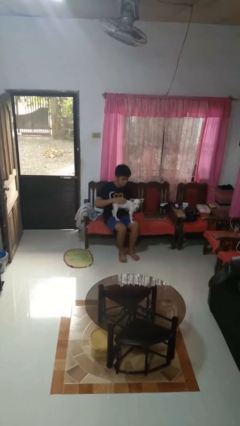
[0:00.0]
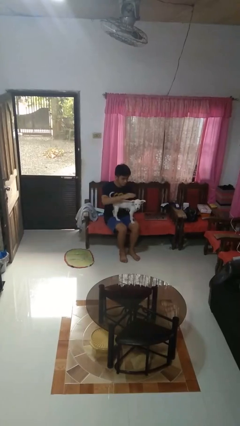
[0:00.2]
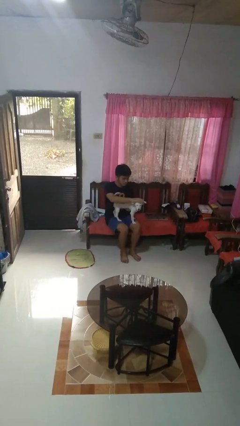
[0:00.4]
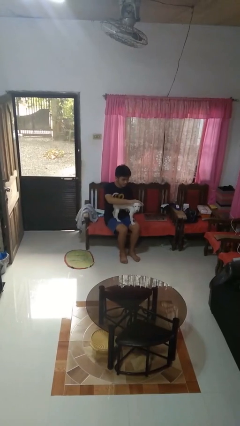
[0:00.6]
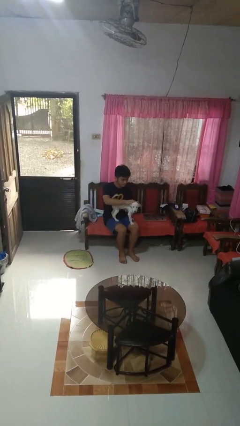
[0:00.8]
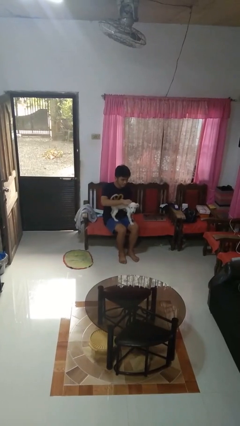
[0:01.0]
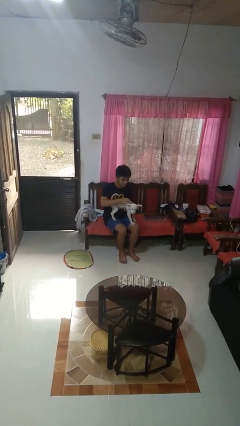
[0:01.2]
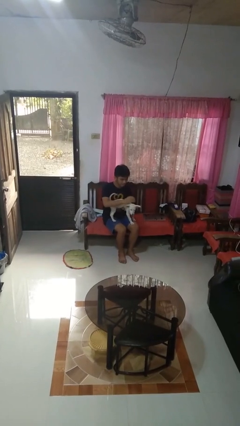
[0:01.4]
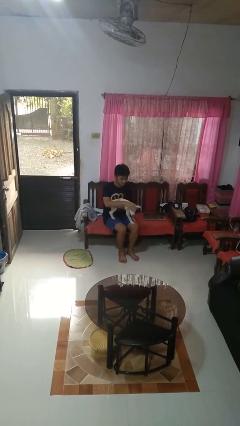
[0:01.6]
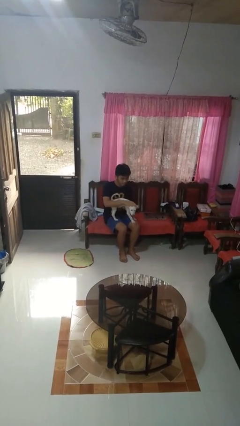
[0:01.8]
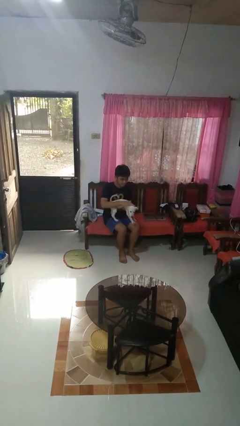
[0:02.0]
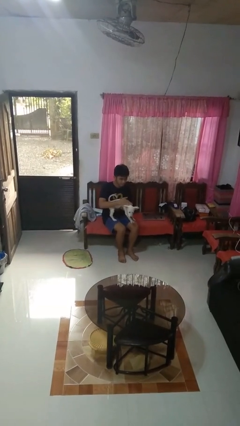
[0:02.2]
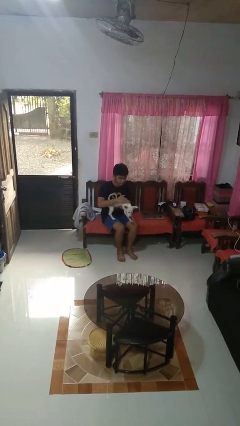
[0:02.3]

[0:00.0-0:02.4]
person pets dog

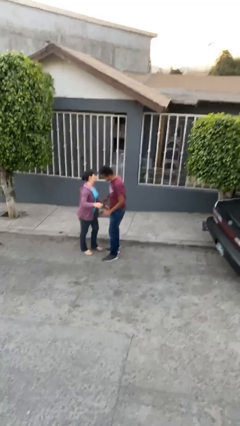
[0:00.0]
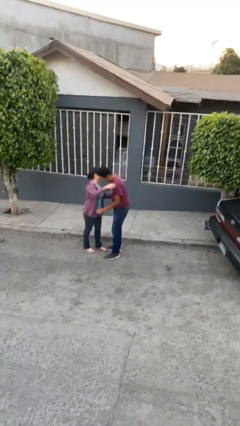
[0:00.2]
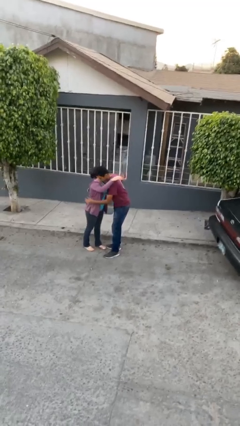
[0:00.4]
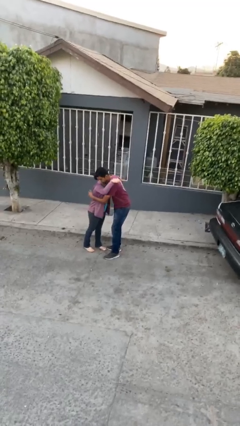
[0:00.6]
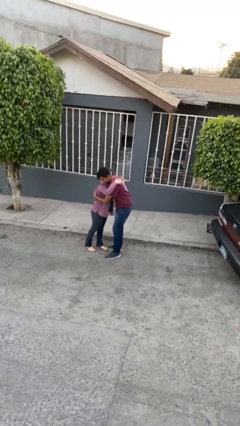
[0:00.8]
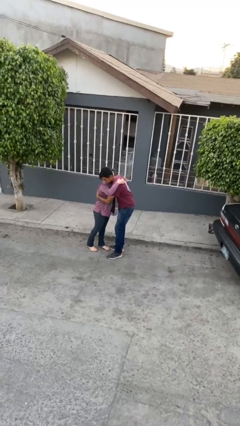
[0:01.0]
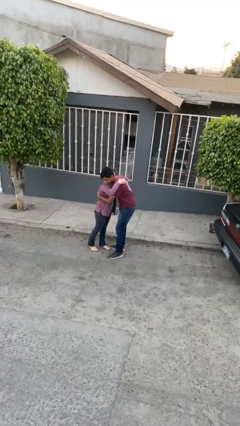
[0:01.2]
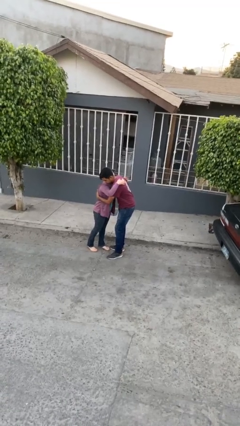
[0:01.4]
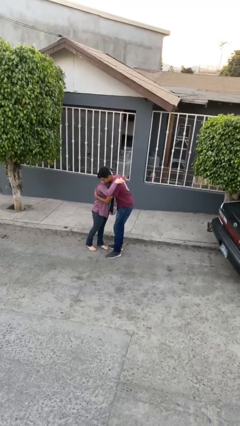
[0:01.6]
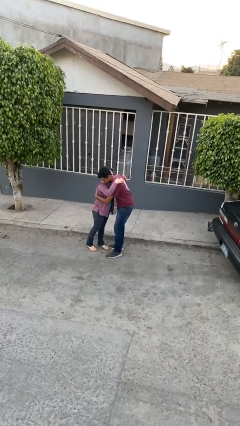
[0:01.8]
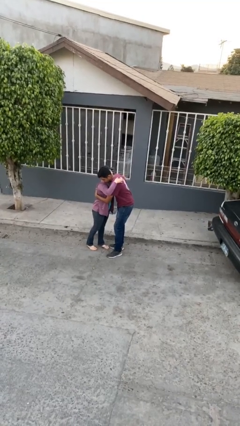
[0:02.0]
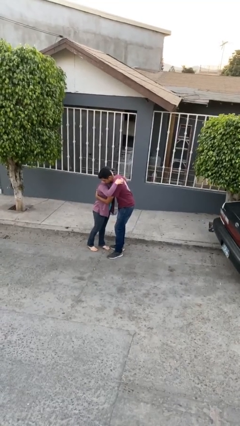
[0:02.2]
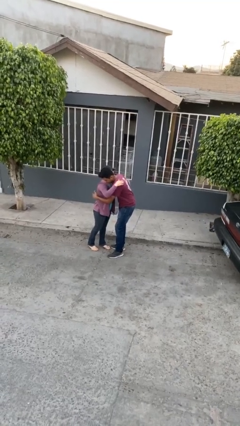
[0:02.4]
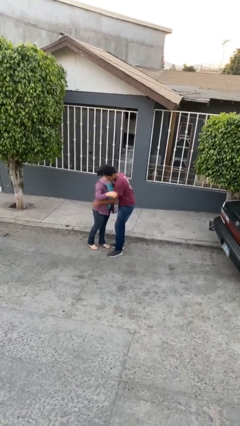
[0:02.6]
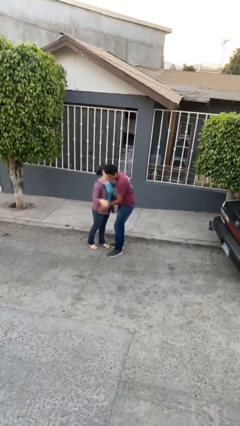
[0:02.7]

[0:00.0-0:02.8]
person embraces person

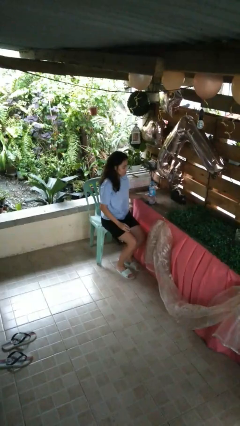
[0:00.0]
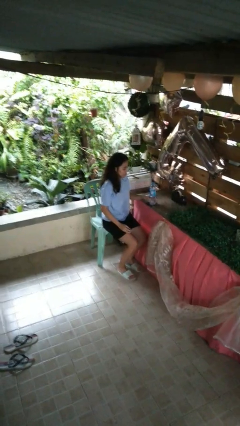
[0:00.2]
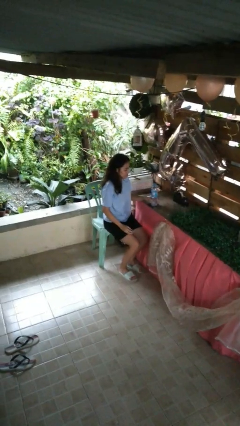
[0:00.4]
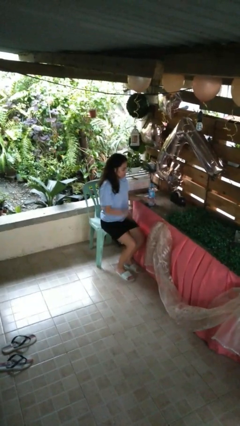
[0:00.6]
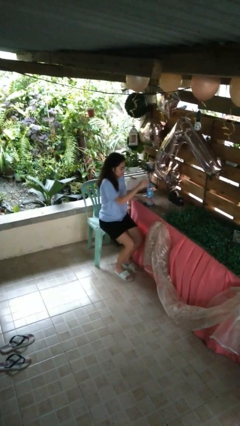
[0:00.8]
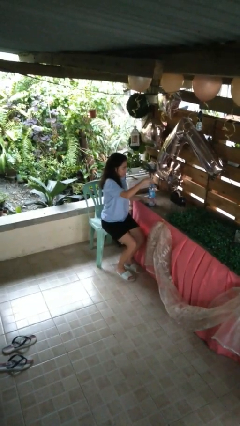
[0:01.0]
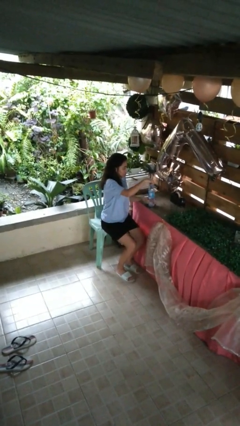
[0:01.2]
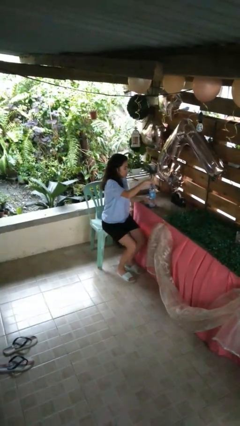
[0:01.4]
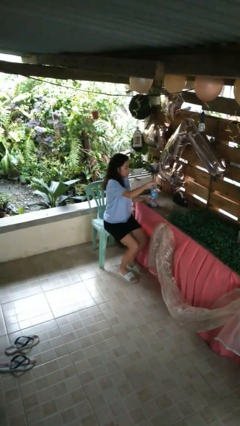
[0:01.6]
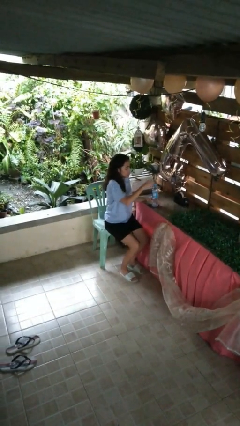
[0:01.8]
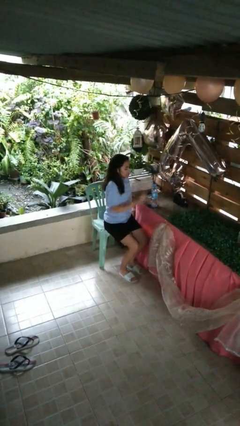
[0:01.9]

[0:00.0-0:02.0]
person screws lid to bottle

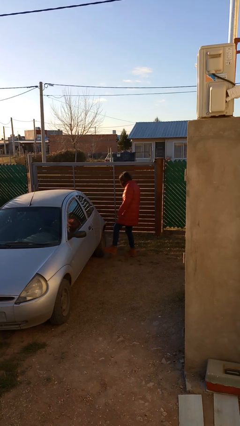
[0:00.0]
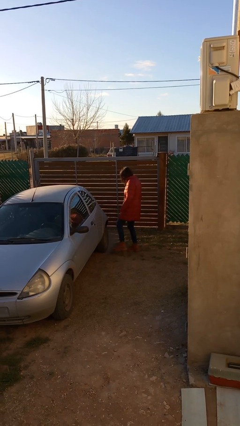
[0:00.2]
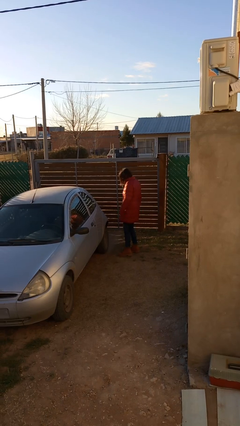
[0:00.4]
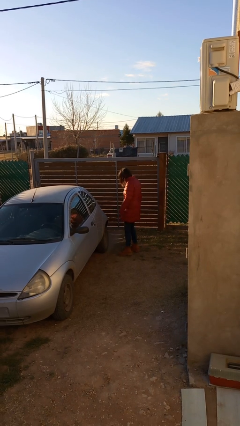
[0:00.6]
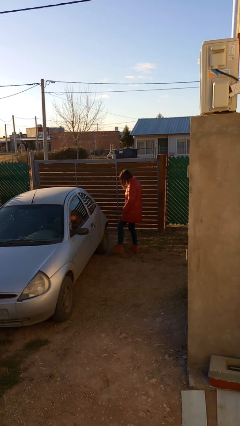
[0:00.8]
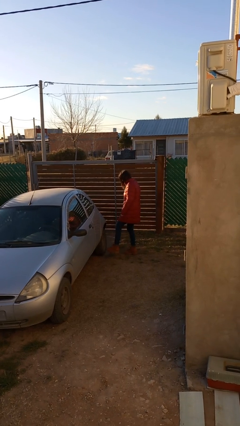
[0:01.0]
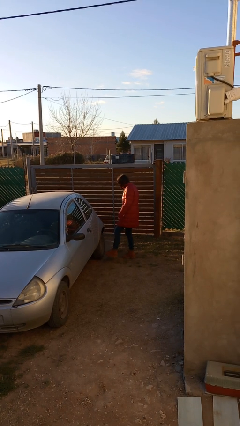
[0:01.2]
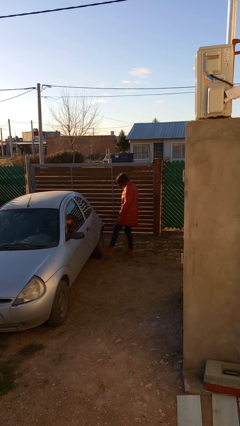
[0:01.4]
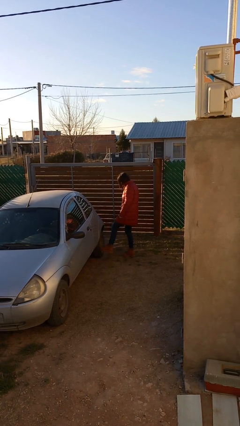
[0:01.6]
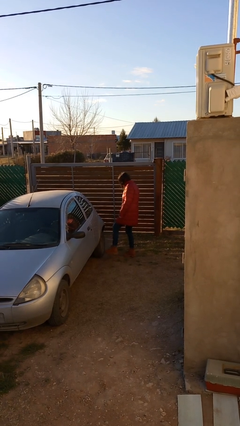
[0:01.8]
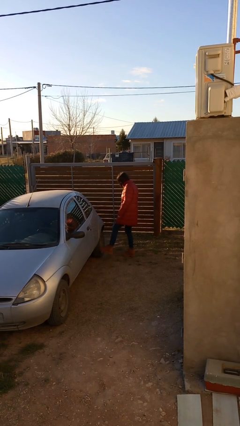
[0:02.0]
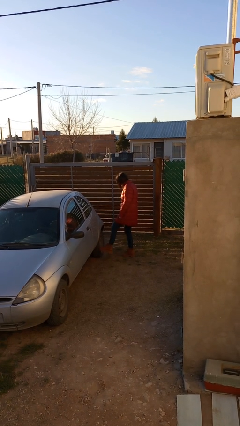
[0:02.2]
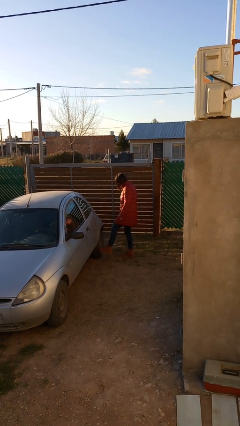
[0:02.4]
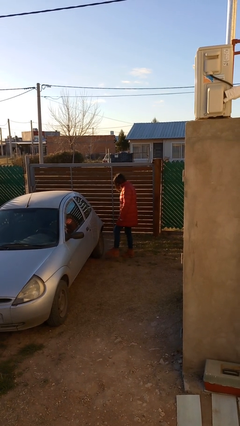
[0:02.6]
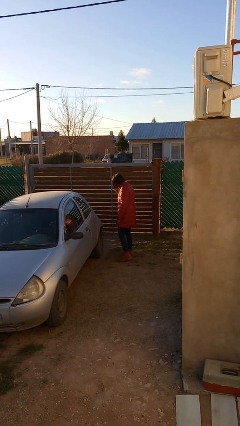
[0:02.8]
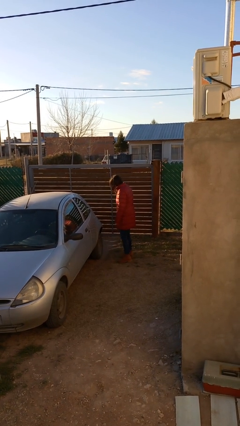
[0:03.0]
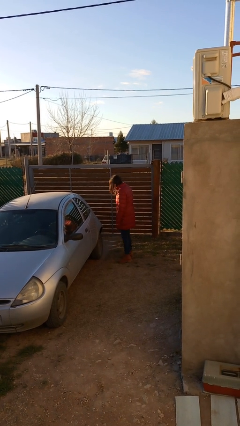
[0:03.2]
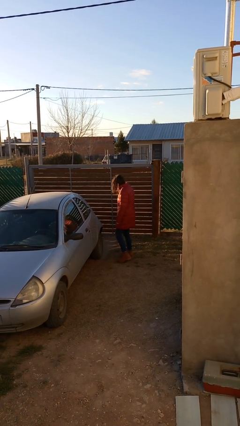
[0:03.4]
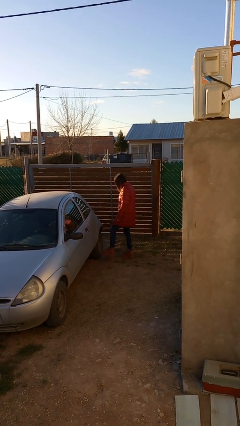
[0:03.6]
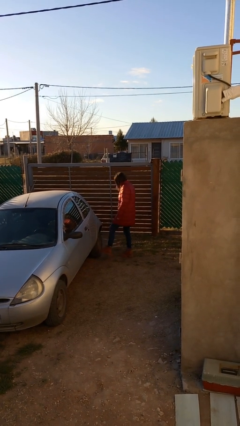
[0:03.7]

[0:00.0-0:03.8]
person kicks car tires

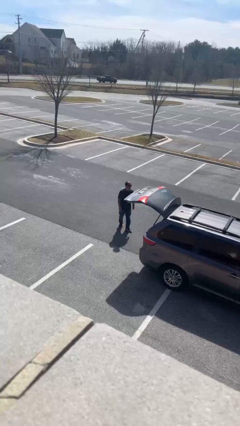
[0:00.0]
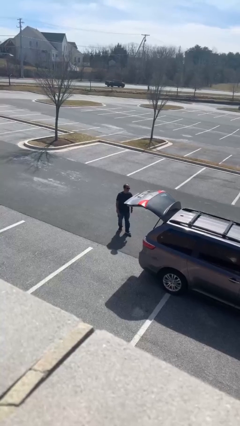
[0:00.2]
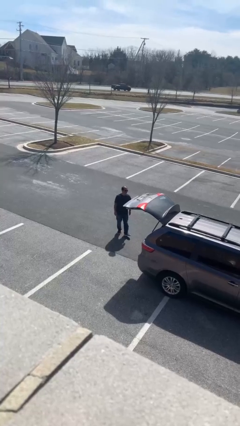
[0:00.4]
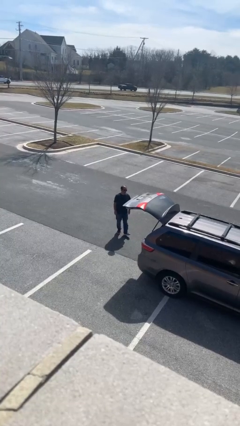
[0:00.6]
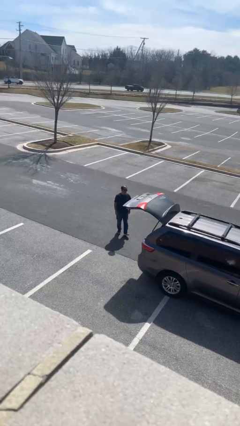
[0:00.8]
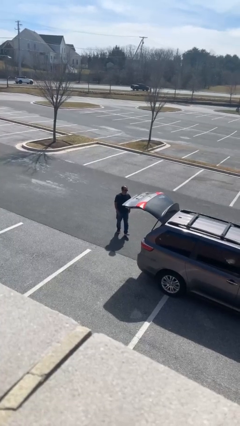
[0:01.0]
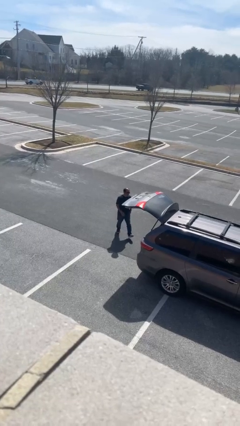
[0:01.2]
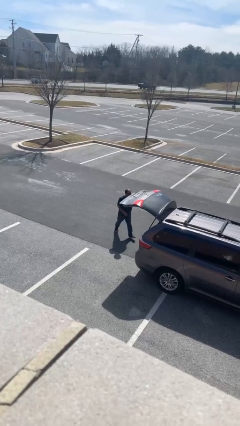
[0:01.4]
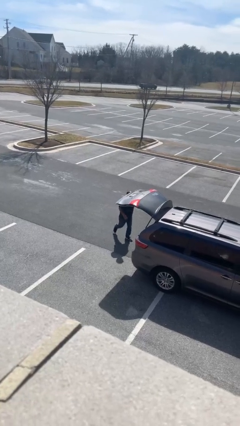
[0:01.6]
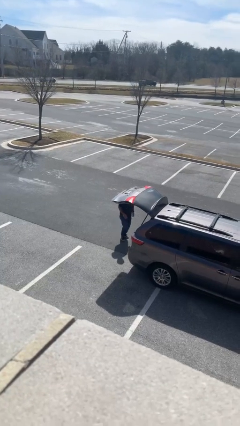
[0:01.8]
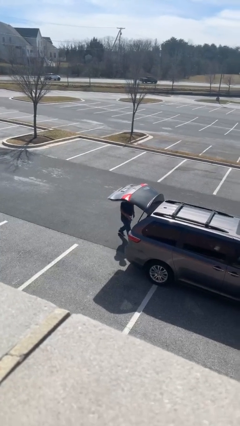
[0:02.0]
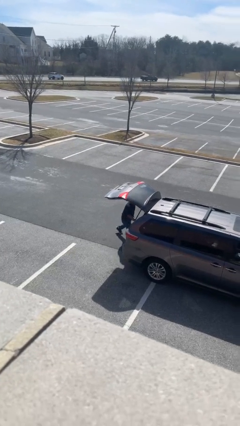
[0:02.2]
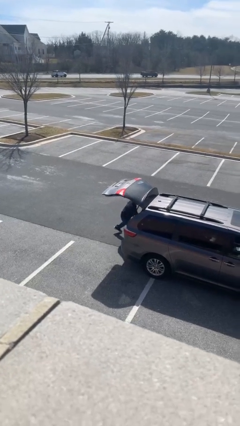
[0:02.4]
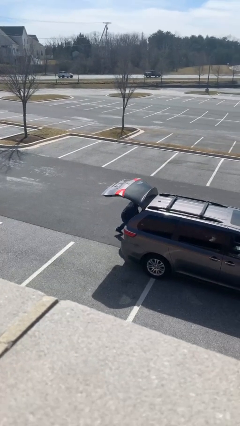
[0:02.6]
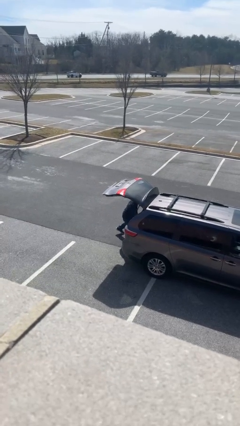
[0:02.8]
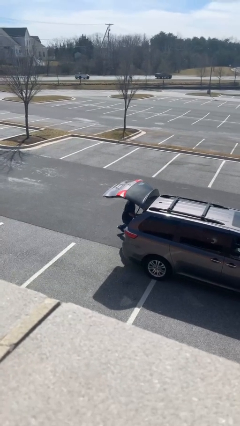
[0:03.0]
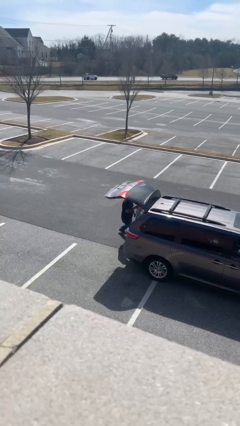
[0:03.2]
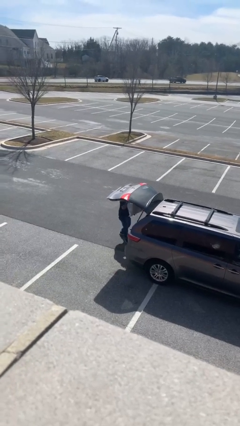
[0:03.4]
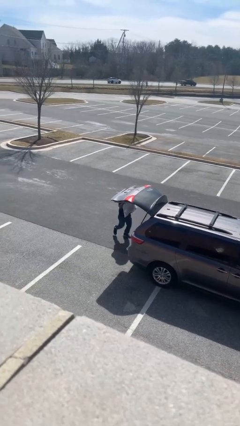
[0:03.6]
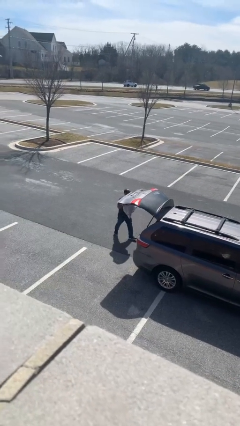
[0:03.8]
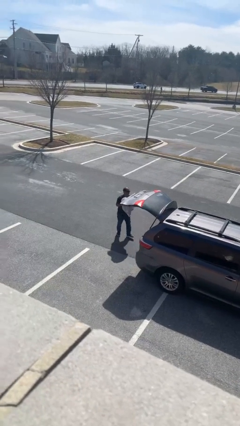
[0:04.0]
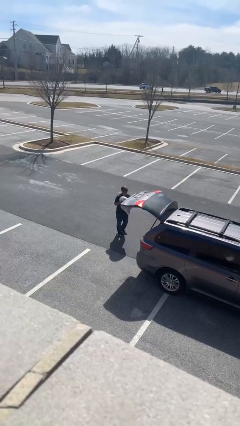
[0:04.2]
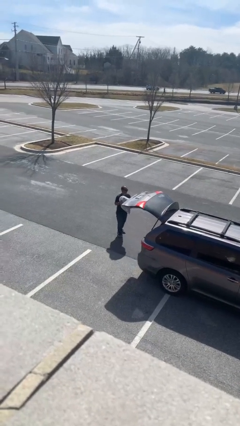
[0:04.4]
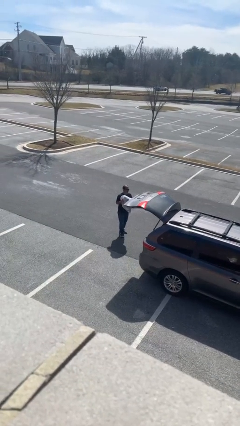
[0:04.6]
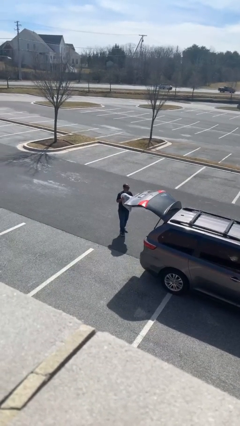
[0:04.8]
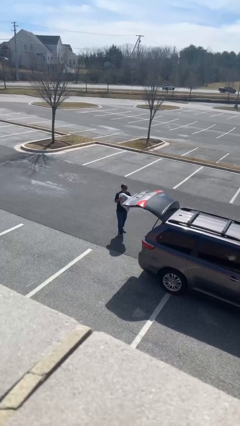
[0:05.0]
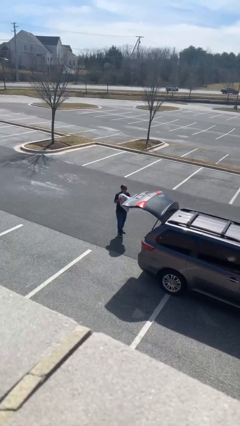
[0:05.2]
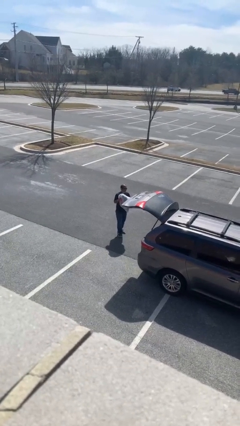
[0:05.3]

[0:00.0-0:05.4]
person unloads car

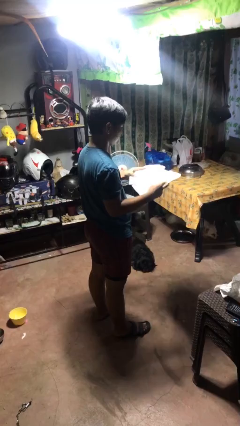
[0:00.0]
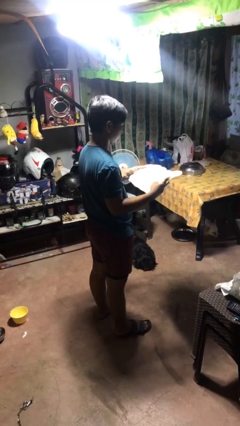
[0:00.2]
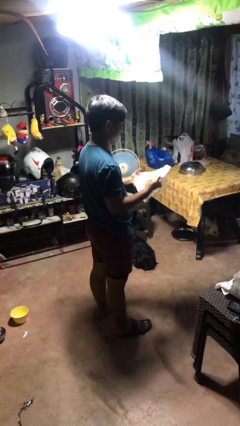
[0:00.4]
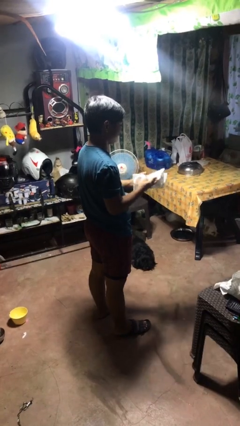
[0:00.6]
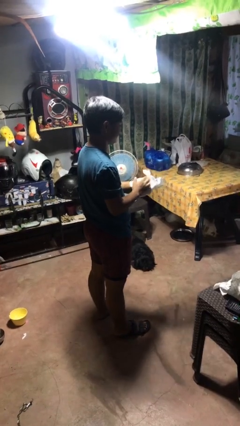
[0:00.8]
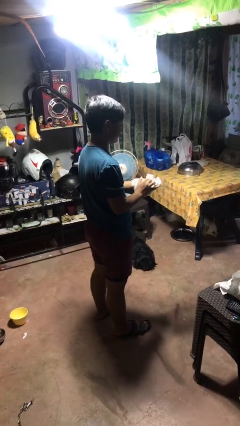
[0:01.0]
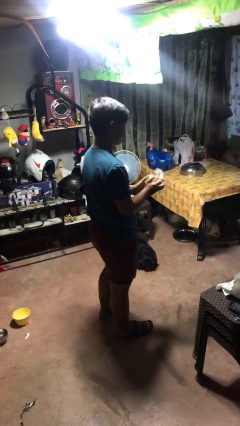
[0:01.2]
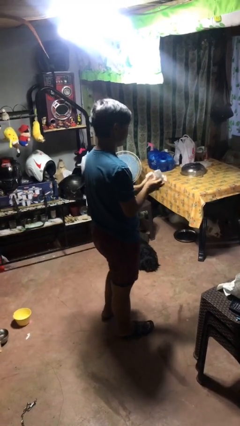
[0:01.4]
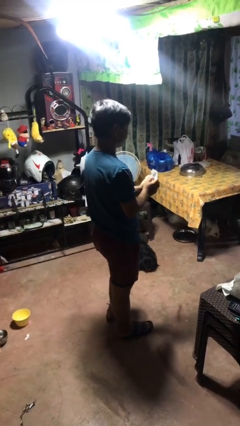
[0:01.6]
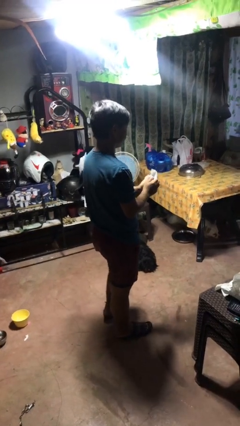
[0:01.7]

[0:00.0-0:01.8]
person crumples paper
